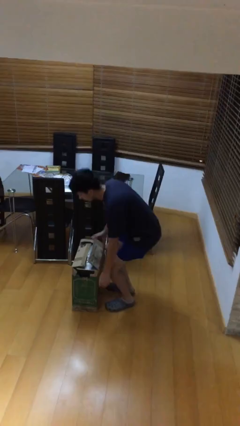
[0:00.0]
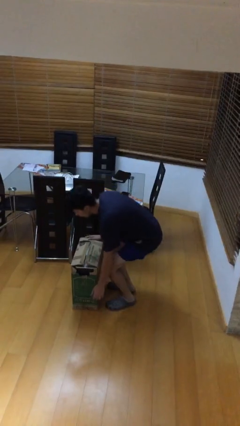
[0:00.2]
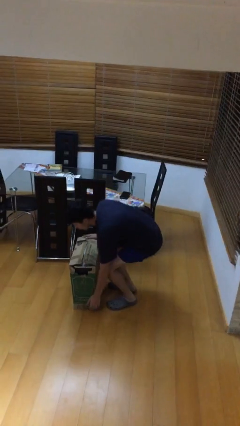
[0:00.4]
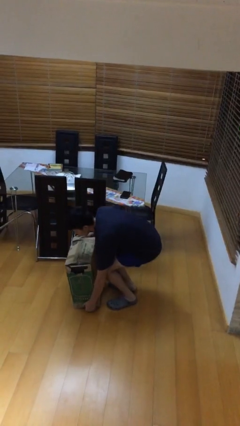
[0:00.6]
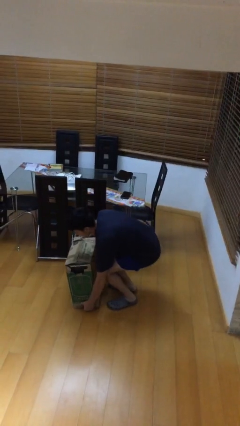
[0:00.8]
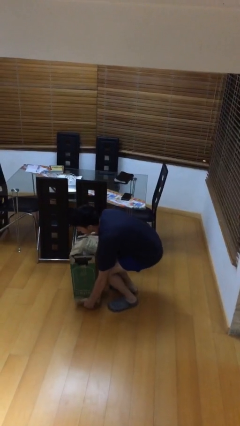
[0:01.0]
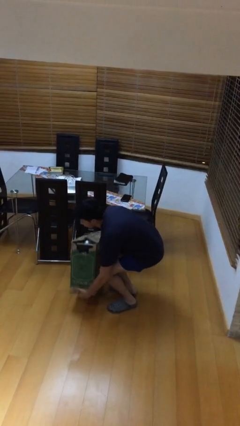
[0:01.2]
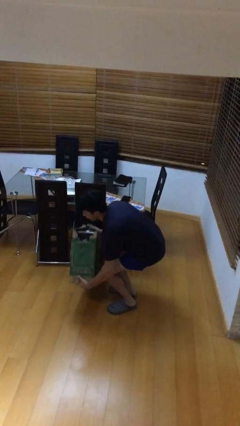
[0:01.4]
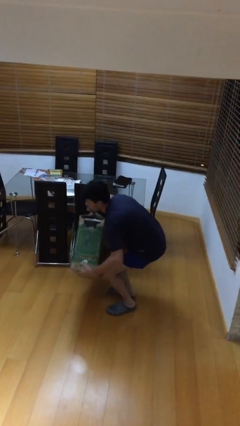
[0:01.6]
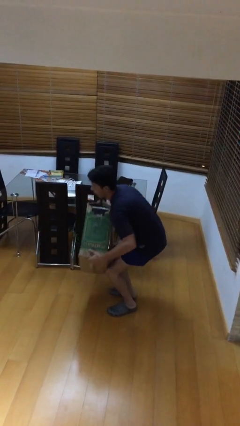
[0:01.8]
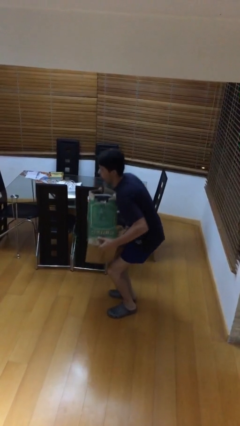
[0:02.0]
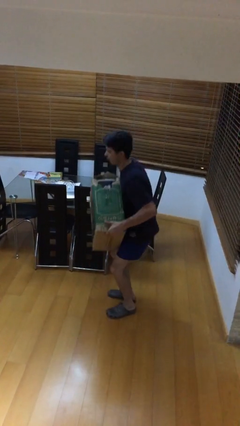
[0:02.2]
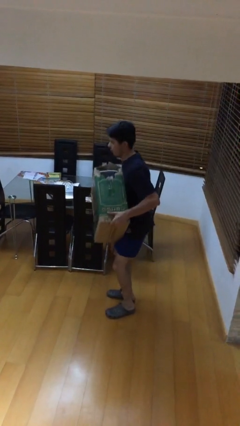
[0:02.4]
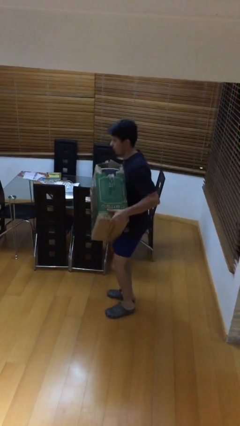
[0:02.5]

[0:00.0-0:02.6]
person picks up object from floor

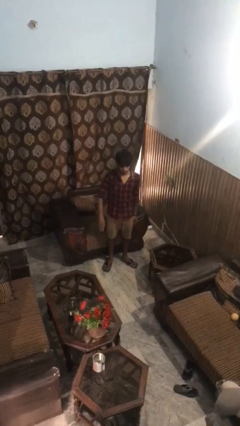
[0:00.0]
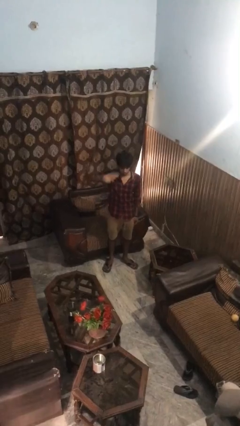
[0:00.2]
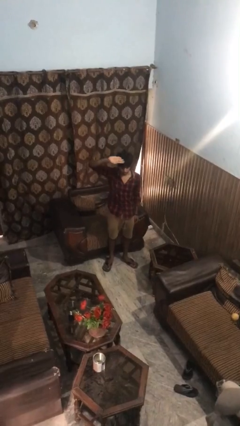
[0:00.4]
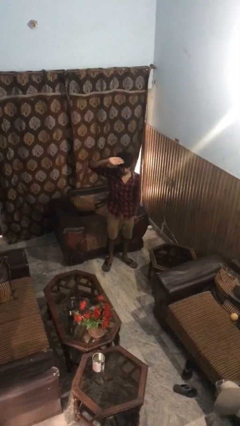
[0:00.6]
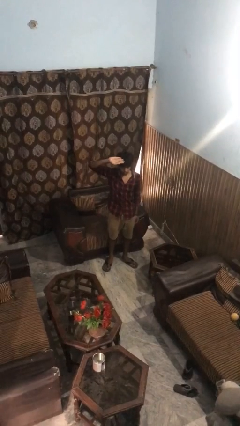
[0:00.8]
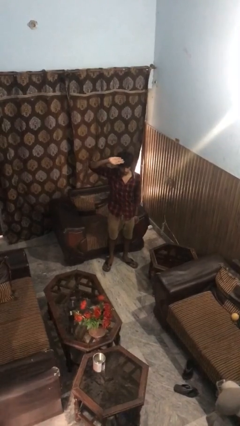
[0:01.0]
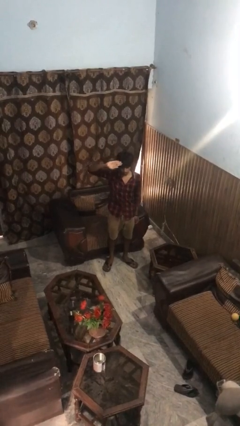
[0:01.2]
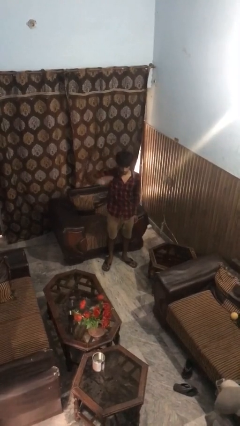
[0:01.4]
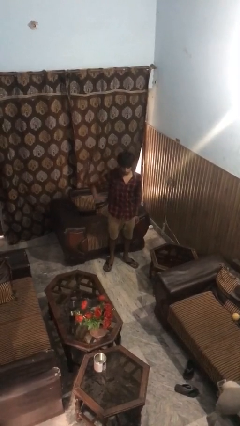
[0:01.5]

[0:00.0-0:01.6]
person salutes

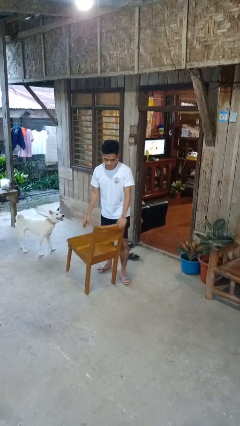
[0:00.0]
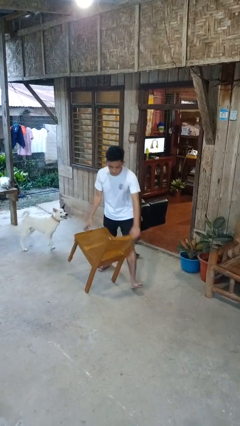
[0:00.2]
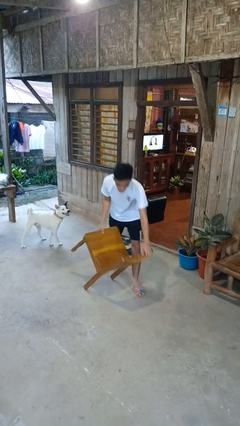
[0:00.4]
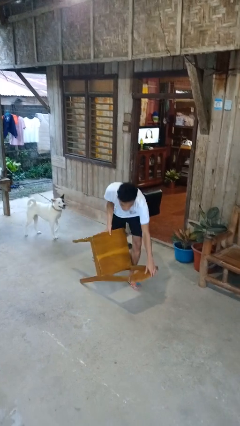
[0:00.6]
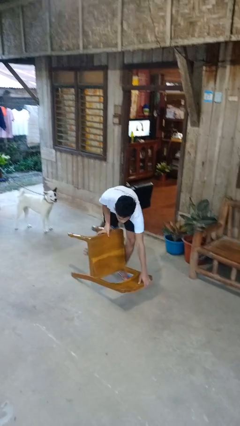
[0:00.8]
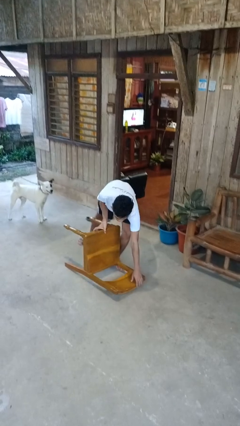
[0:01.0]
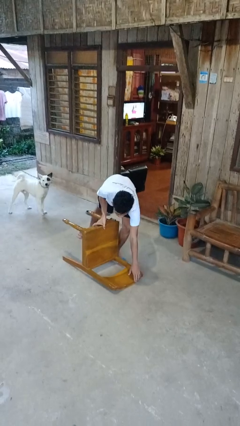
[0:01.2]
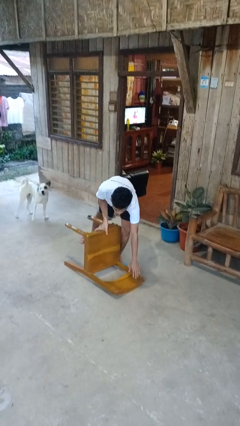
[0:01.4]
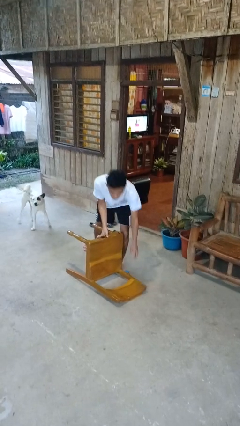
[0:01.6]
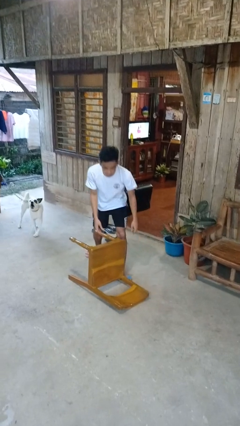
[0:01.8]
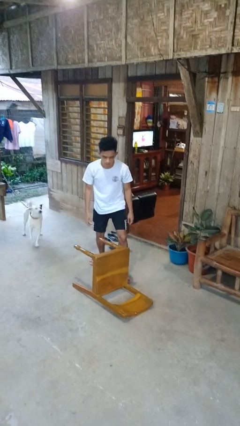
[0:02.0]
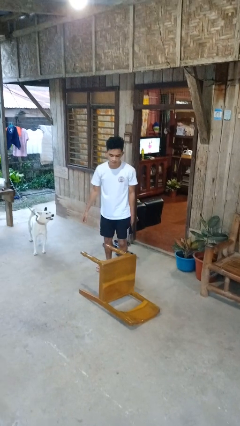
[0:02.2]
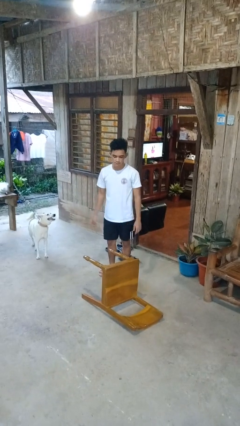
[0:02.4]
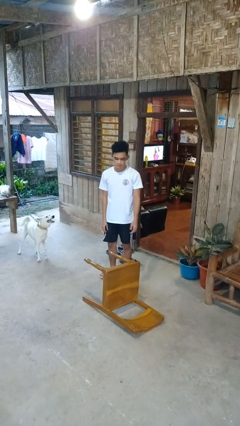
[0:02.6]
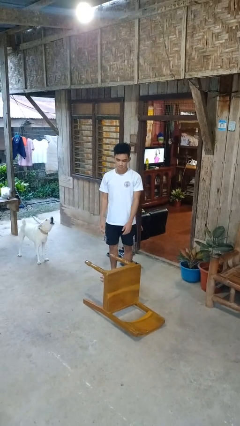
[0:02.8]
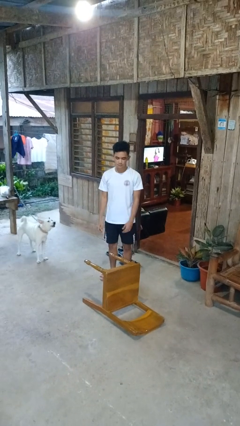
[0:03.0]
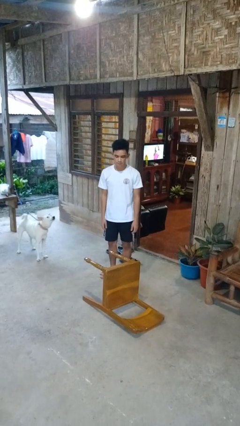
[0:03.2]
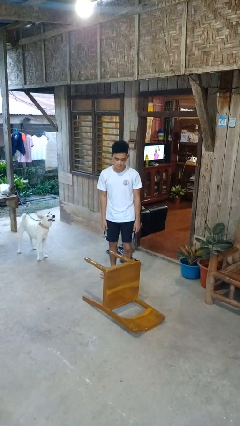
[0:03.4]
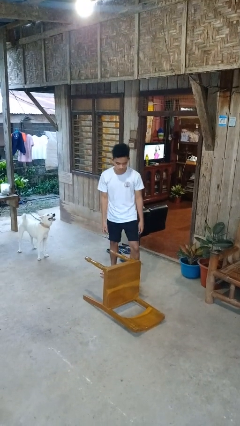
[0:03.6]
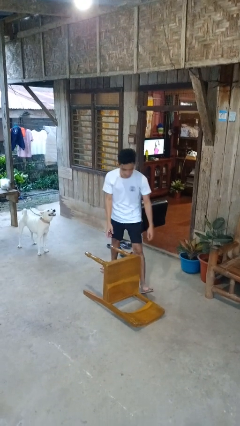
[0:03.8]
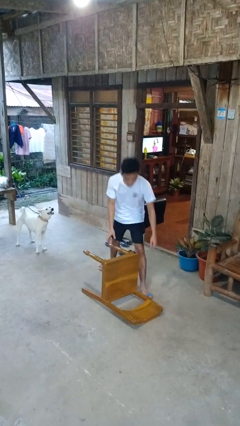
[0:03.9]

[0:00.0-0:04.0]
person knocks over glass

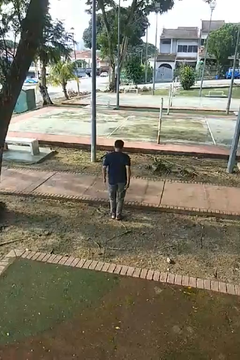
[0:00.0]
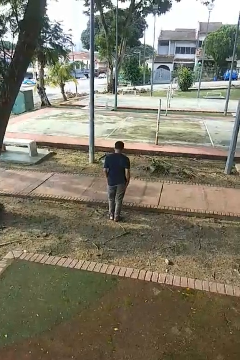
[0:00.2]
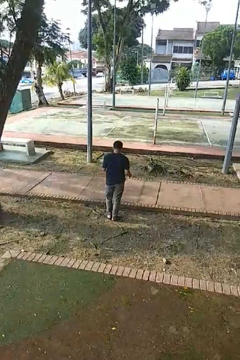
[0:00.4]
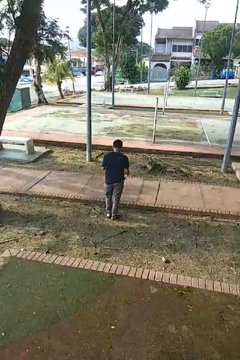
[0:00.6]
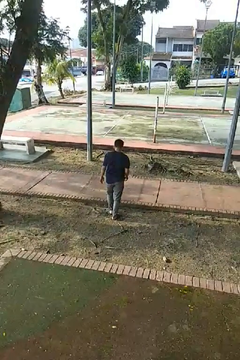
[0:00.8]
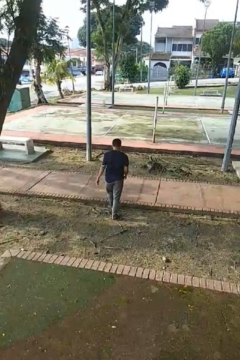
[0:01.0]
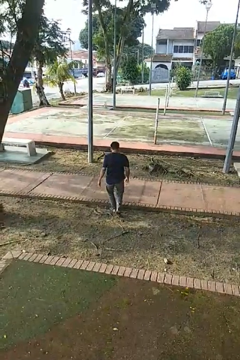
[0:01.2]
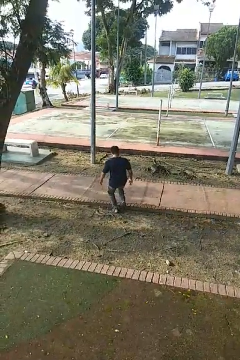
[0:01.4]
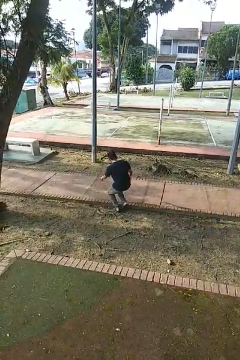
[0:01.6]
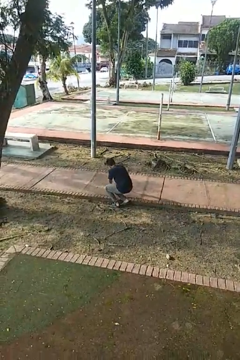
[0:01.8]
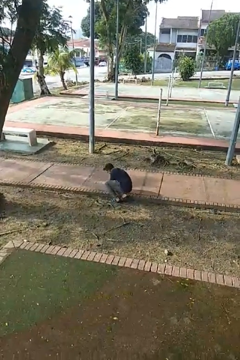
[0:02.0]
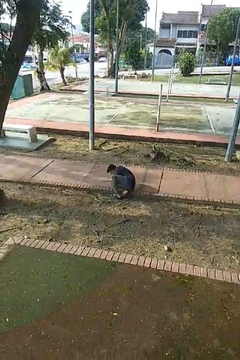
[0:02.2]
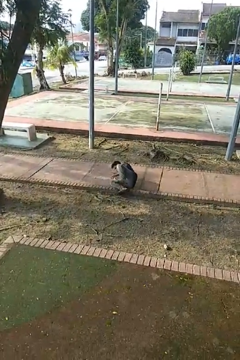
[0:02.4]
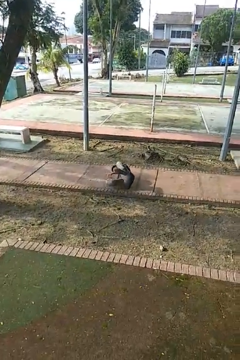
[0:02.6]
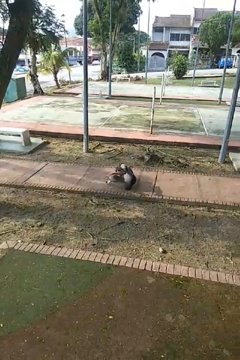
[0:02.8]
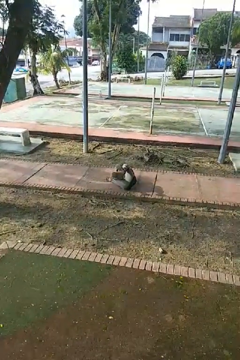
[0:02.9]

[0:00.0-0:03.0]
person trips on object on floor

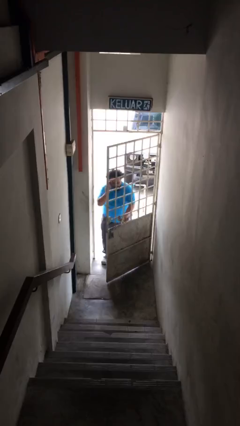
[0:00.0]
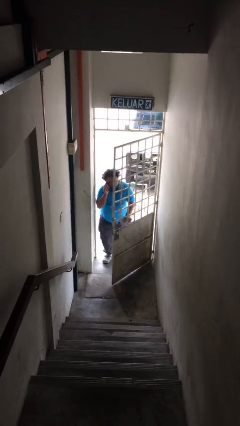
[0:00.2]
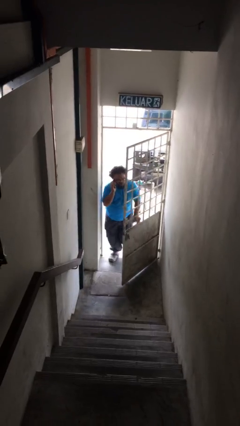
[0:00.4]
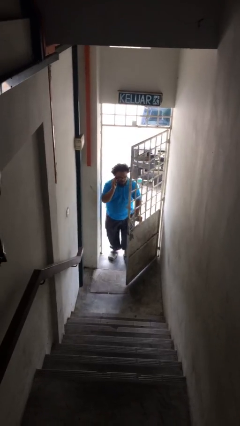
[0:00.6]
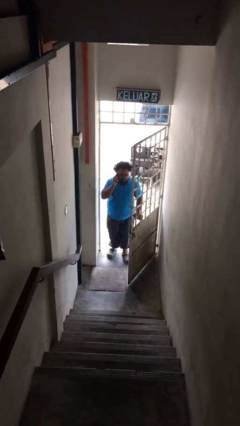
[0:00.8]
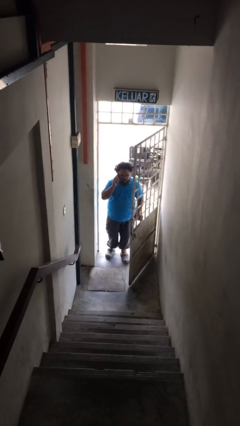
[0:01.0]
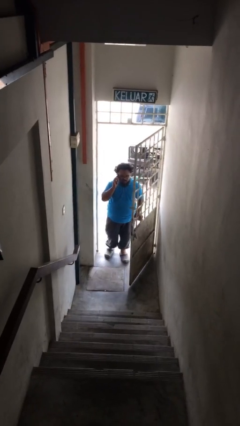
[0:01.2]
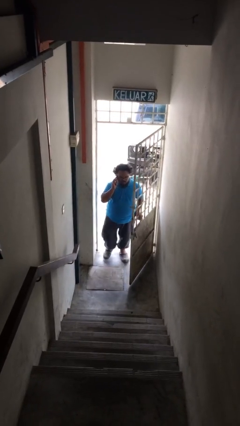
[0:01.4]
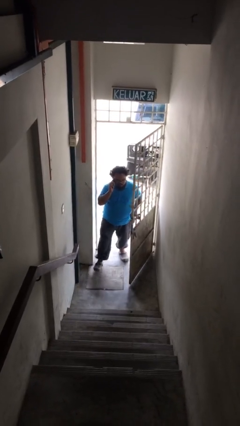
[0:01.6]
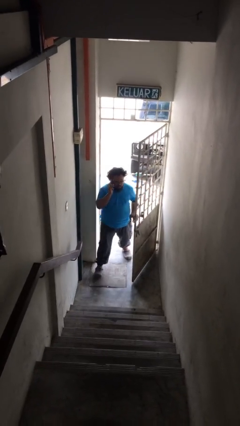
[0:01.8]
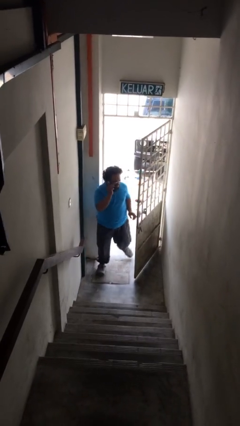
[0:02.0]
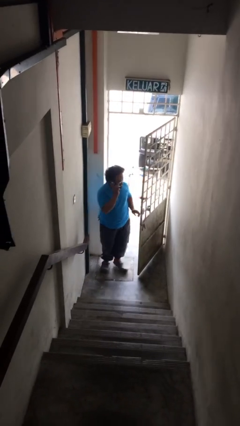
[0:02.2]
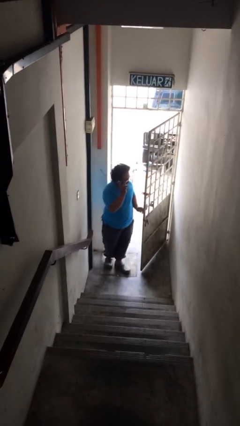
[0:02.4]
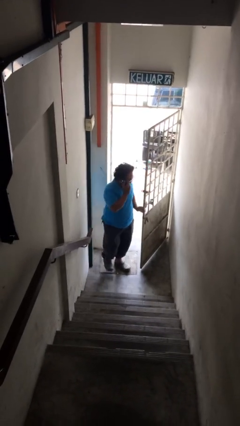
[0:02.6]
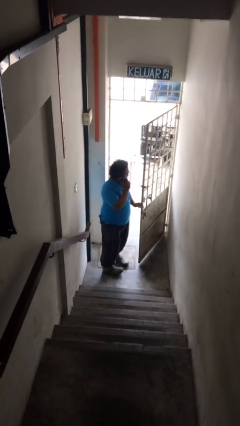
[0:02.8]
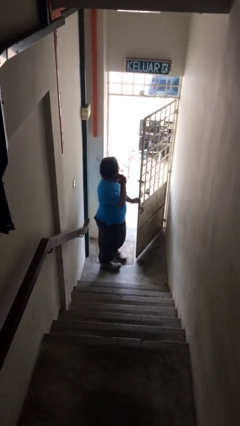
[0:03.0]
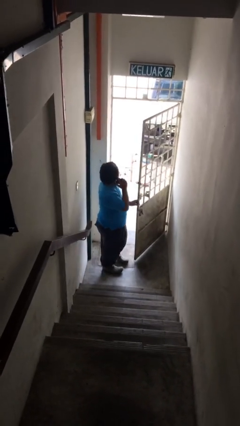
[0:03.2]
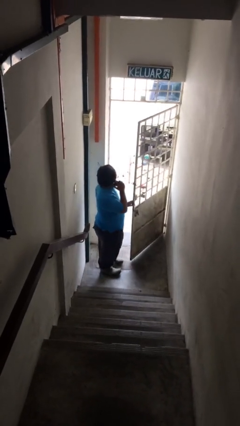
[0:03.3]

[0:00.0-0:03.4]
person enters scene through structure

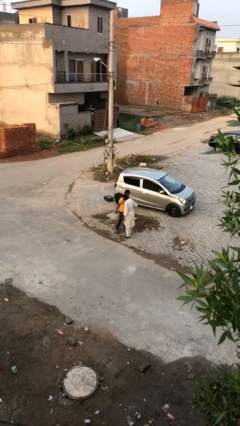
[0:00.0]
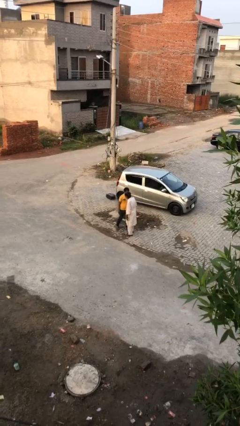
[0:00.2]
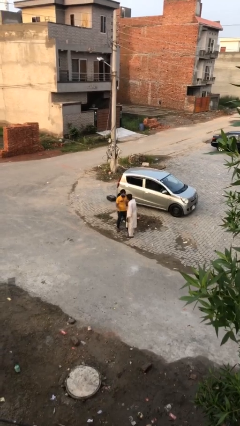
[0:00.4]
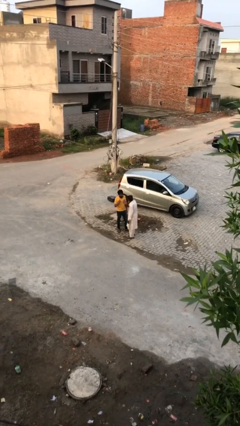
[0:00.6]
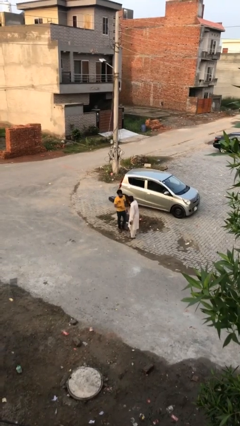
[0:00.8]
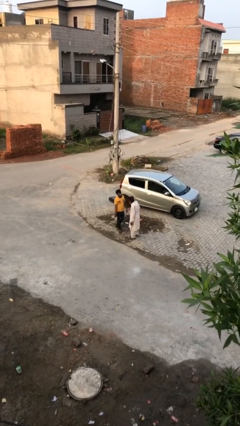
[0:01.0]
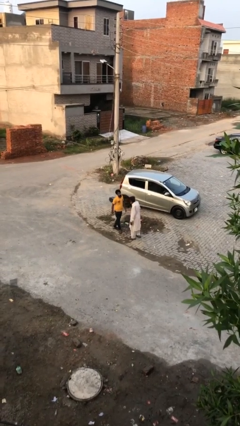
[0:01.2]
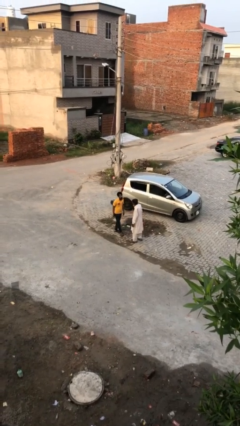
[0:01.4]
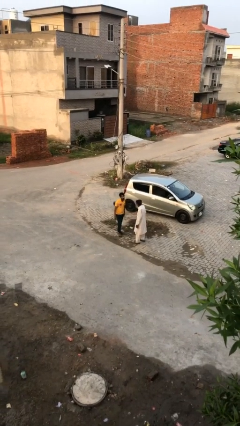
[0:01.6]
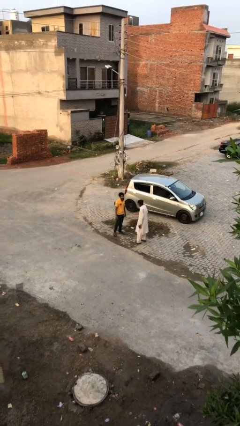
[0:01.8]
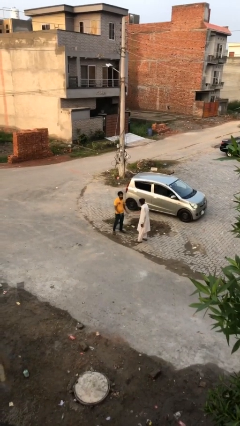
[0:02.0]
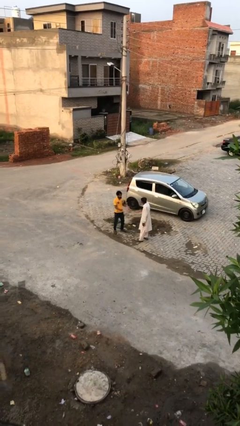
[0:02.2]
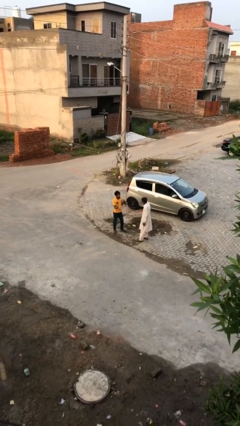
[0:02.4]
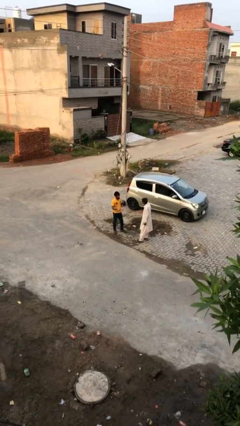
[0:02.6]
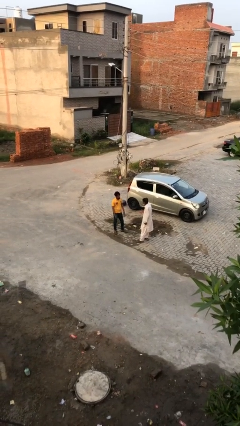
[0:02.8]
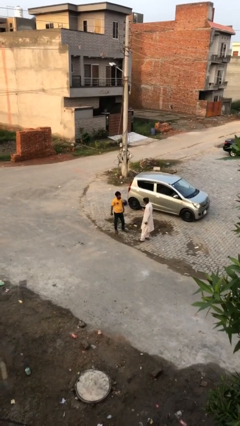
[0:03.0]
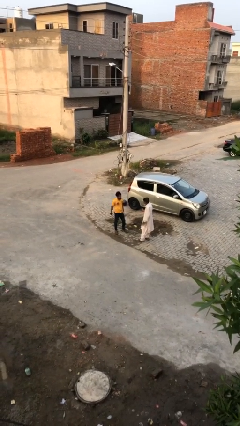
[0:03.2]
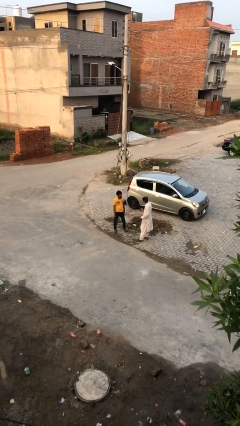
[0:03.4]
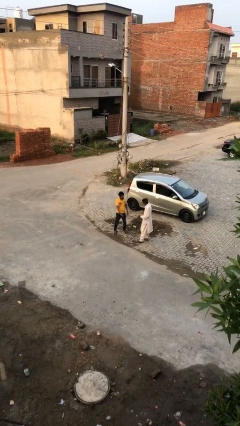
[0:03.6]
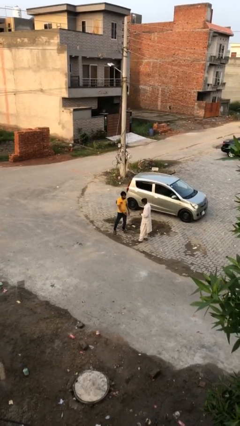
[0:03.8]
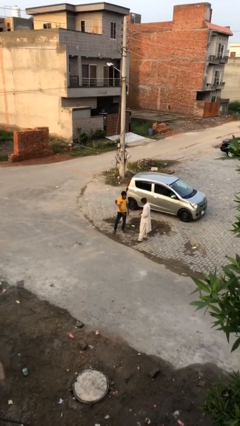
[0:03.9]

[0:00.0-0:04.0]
person talks to person
